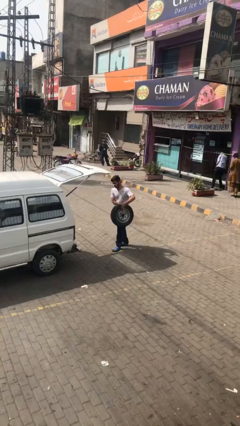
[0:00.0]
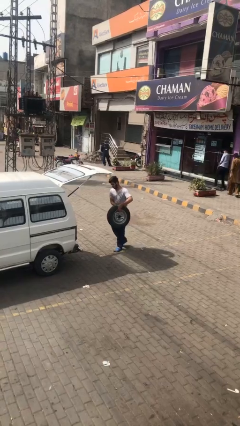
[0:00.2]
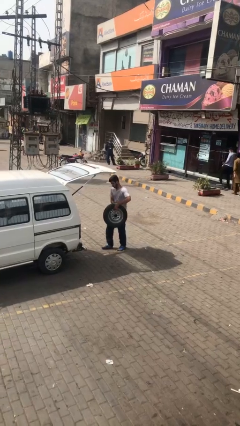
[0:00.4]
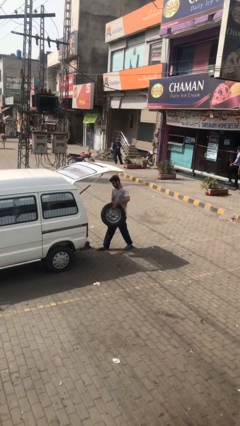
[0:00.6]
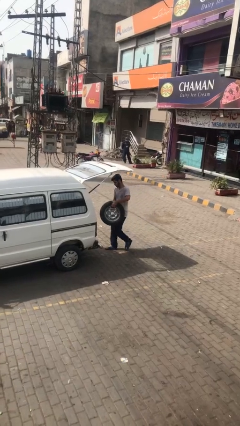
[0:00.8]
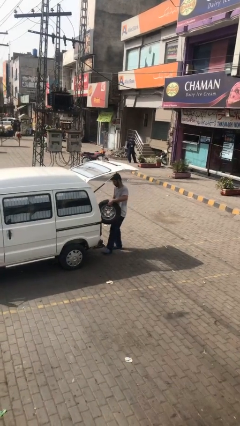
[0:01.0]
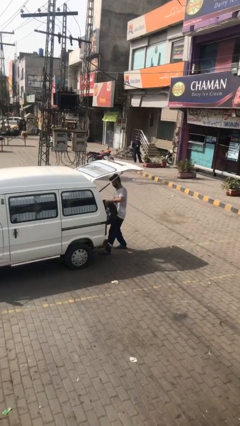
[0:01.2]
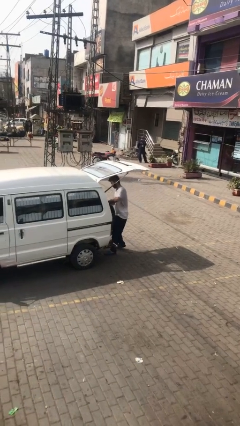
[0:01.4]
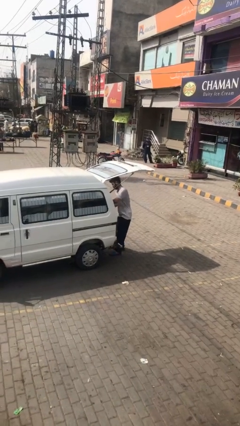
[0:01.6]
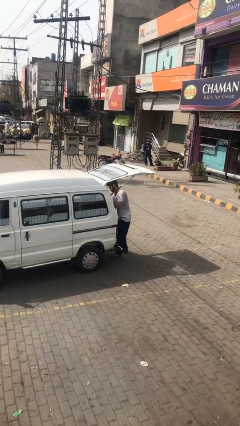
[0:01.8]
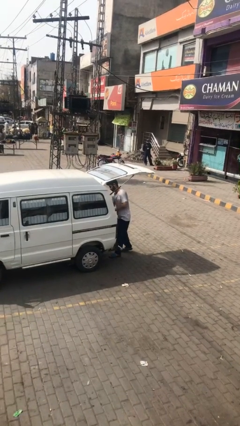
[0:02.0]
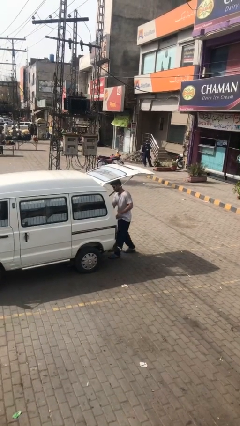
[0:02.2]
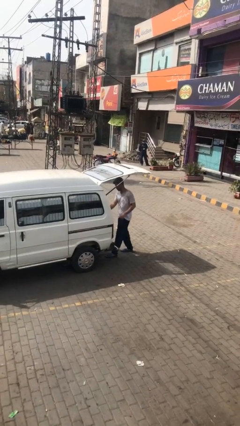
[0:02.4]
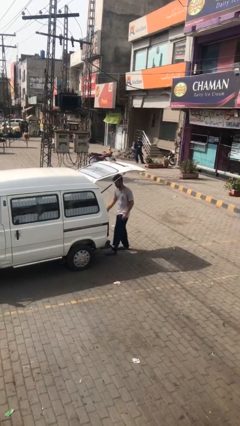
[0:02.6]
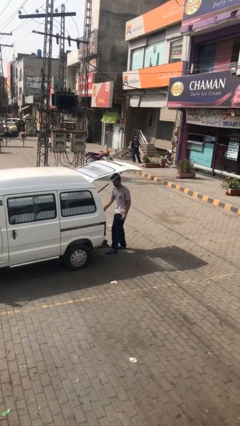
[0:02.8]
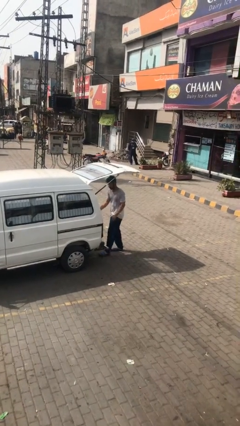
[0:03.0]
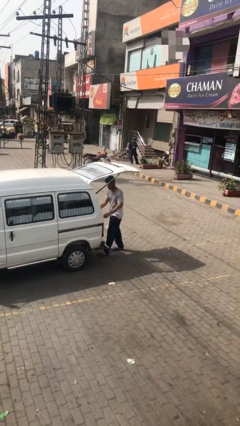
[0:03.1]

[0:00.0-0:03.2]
person loads car

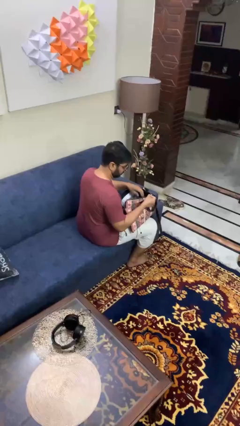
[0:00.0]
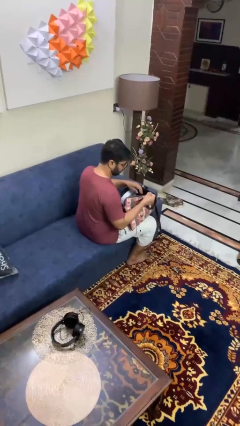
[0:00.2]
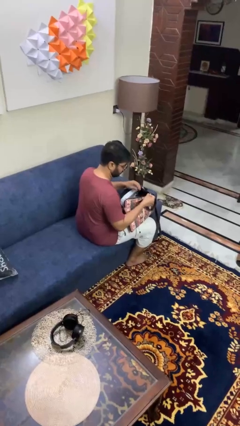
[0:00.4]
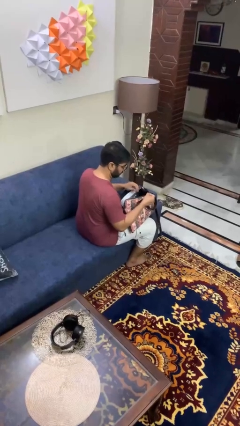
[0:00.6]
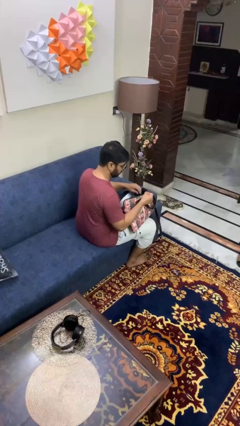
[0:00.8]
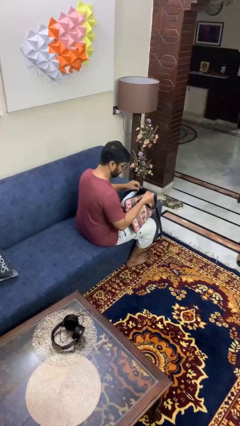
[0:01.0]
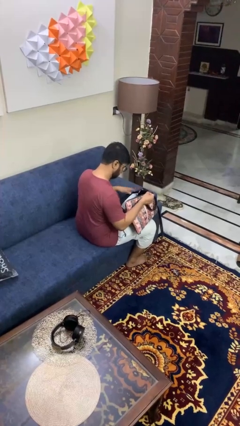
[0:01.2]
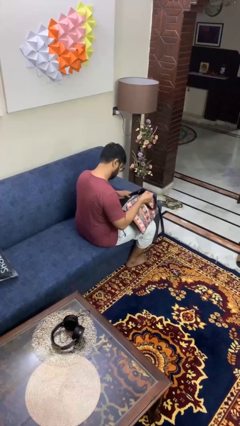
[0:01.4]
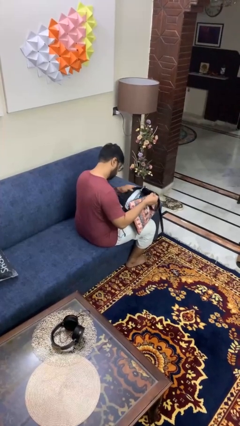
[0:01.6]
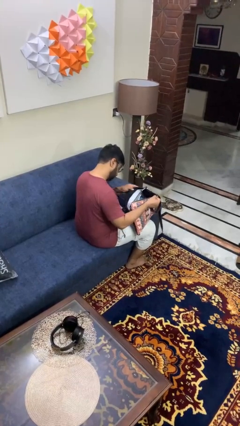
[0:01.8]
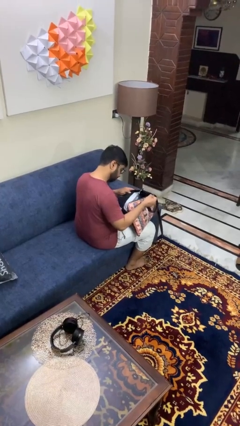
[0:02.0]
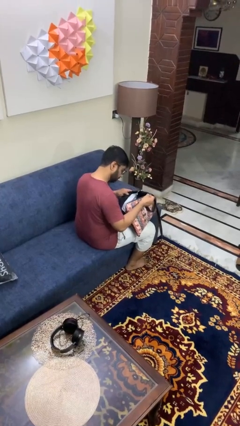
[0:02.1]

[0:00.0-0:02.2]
person searches in purse

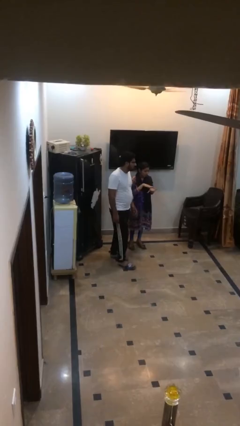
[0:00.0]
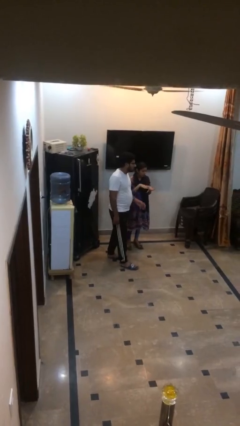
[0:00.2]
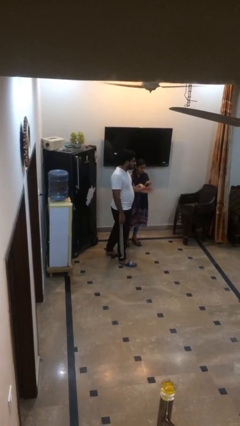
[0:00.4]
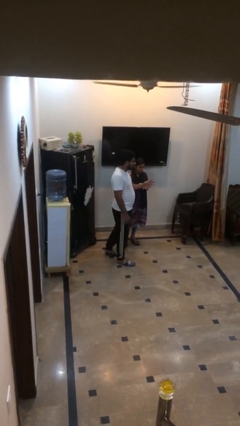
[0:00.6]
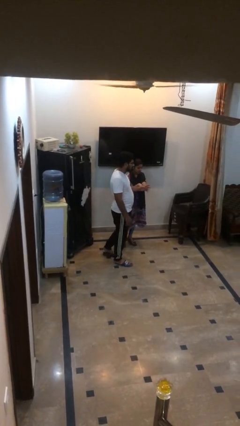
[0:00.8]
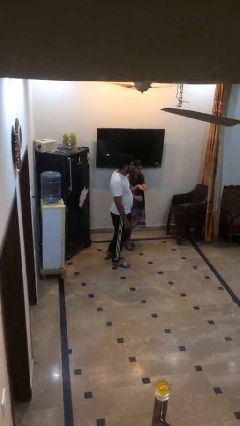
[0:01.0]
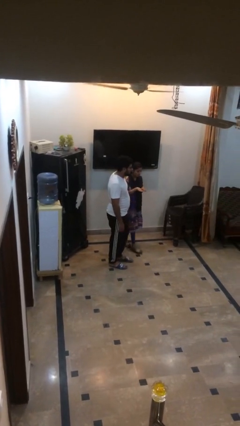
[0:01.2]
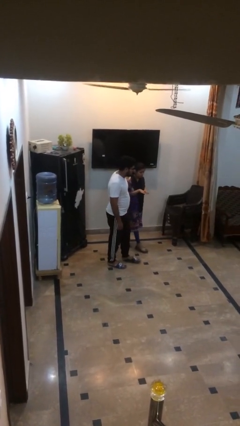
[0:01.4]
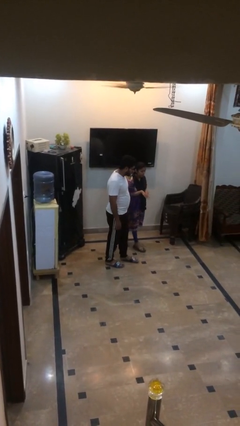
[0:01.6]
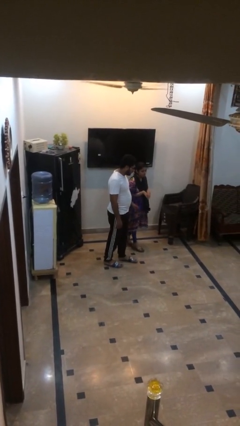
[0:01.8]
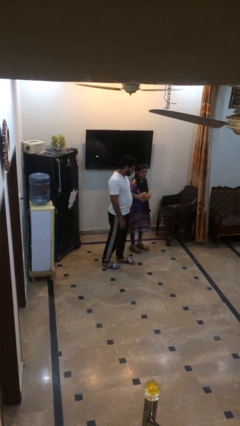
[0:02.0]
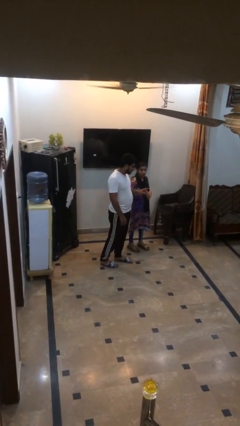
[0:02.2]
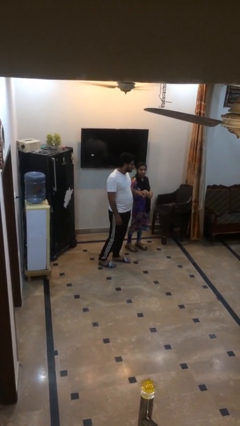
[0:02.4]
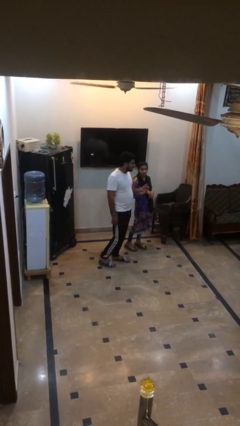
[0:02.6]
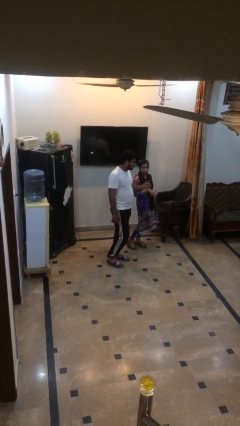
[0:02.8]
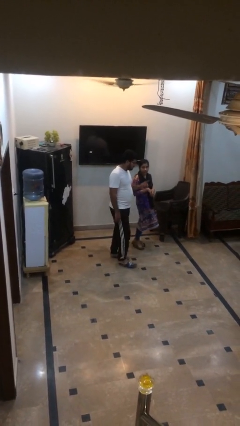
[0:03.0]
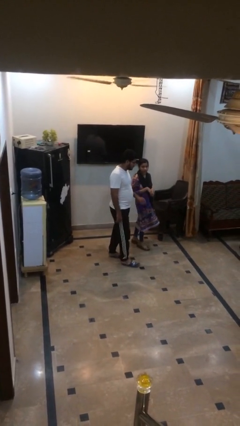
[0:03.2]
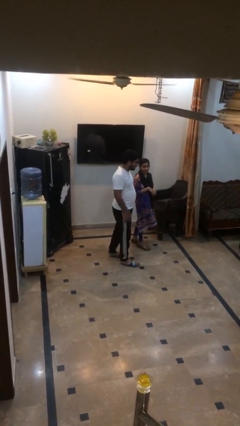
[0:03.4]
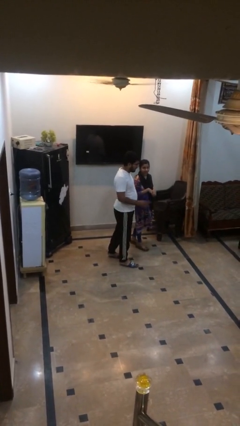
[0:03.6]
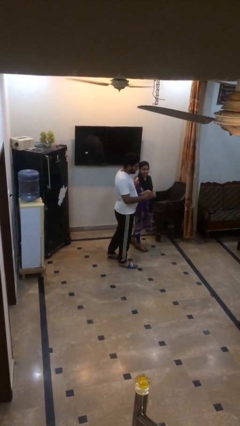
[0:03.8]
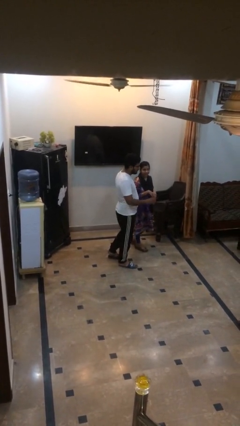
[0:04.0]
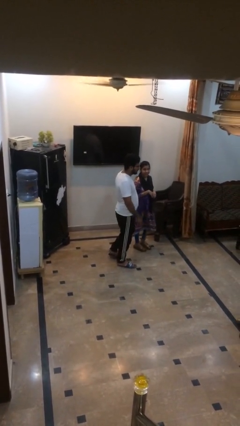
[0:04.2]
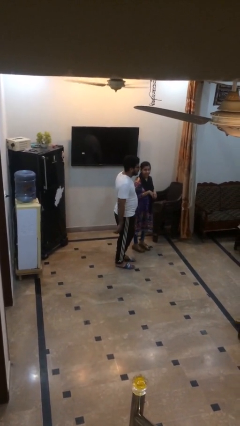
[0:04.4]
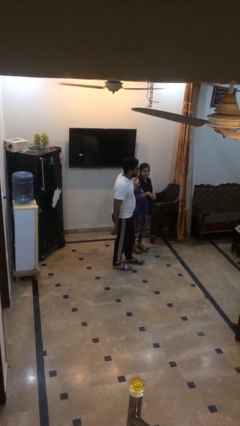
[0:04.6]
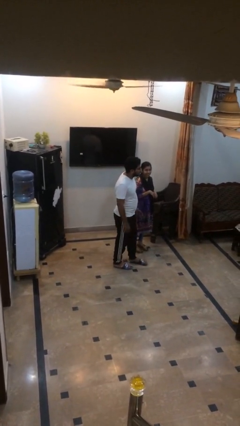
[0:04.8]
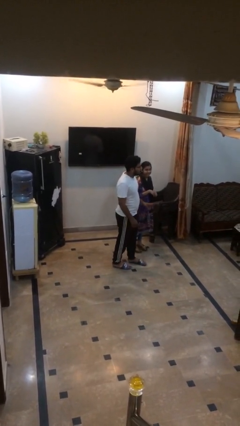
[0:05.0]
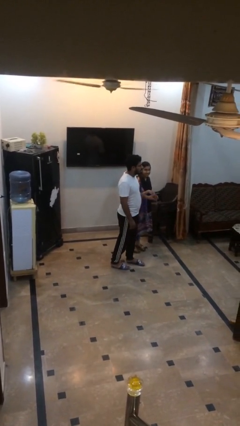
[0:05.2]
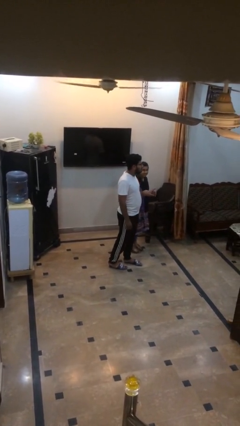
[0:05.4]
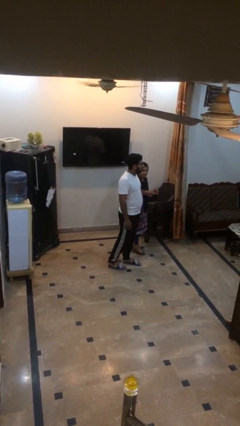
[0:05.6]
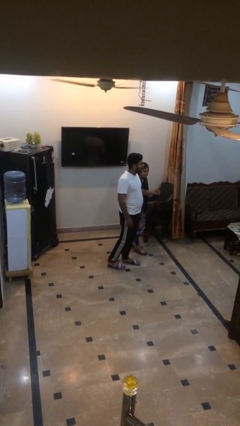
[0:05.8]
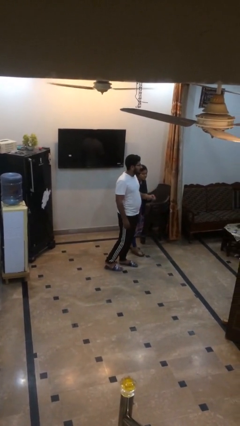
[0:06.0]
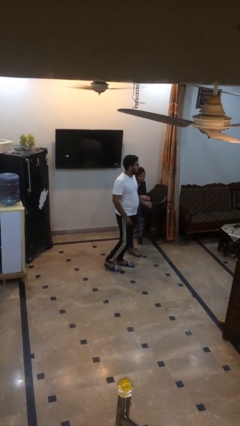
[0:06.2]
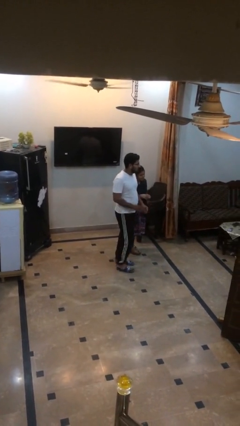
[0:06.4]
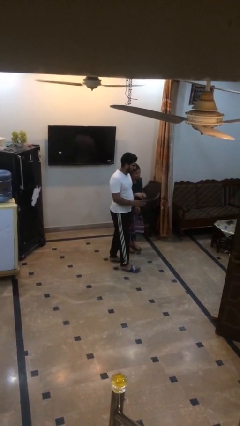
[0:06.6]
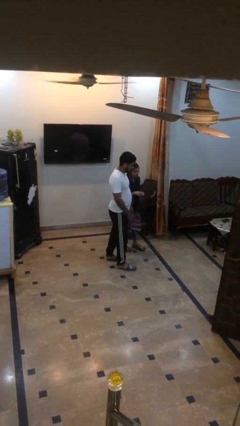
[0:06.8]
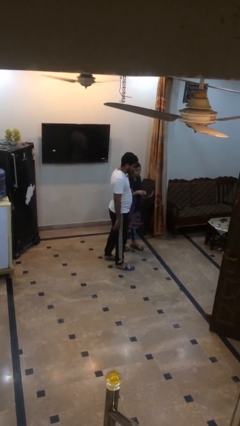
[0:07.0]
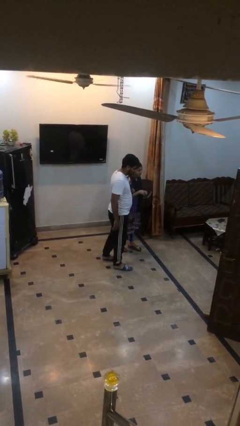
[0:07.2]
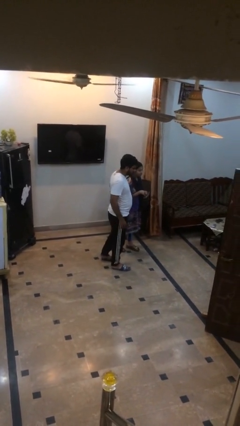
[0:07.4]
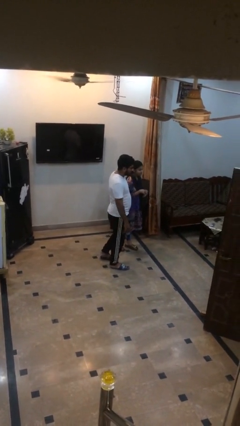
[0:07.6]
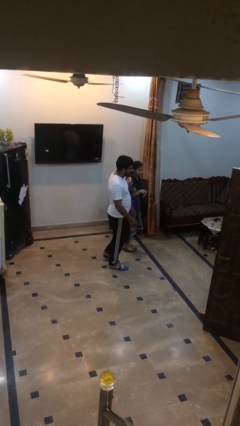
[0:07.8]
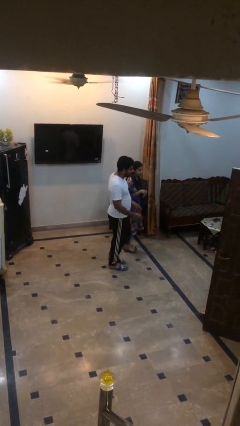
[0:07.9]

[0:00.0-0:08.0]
person talks to person

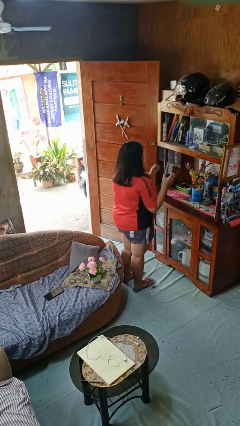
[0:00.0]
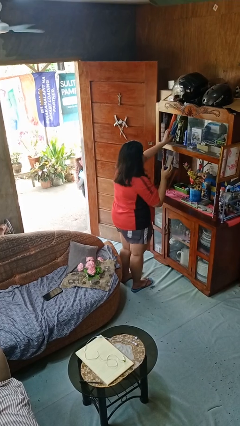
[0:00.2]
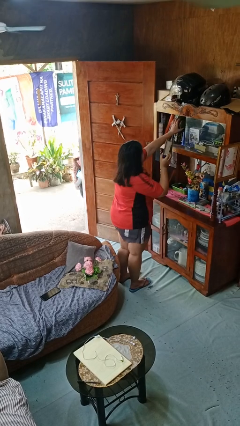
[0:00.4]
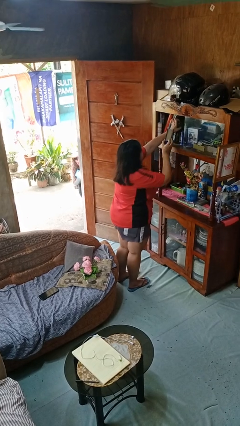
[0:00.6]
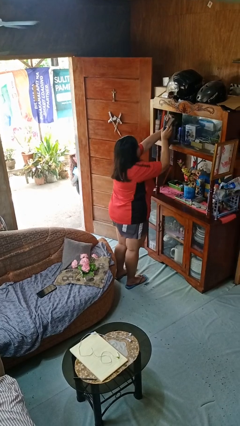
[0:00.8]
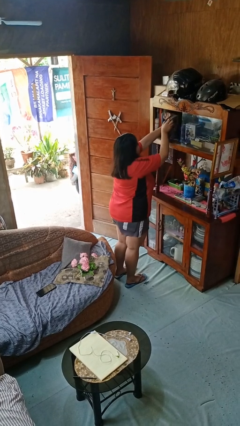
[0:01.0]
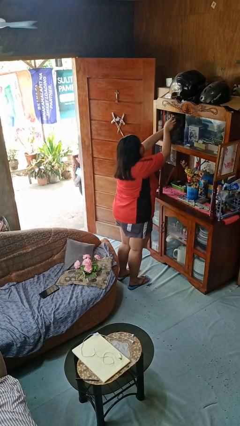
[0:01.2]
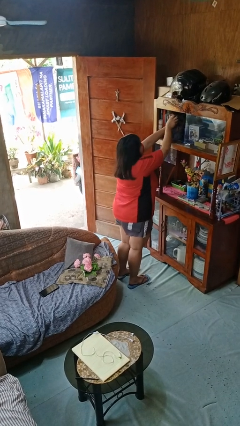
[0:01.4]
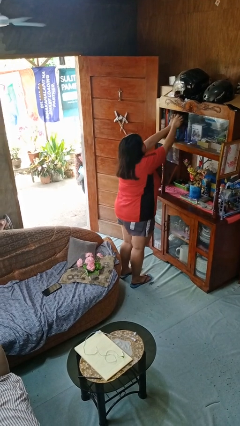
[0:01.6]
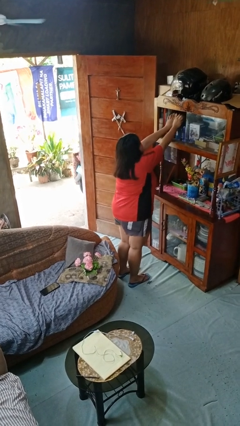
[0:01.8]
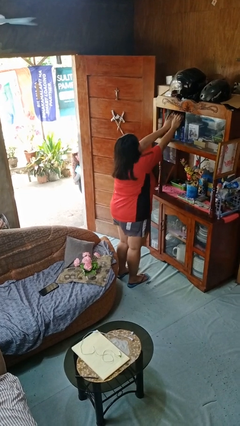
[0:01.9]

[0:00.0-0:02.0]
person puts down object on shelf

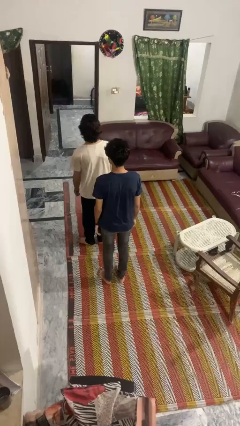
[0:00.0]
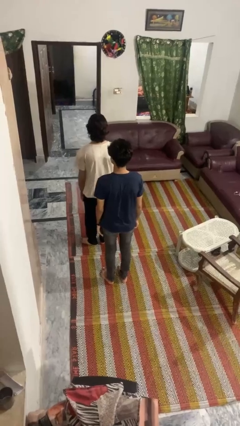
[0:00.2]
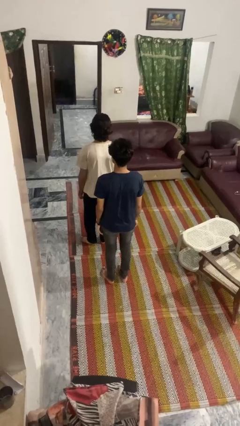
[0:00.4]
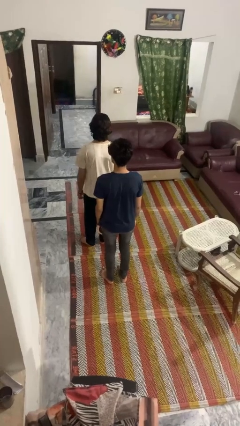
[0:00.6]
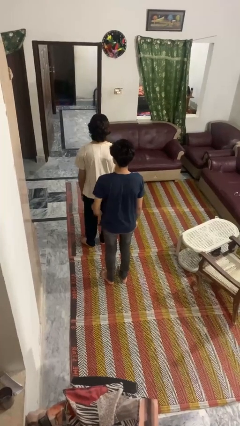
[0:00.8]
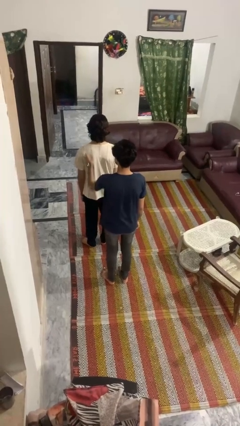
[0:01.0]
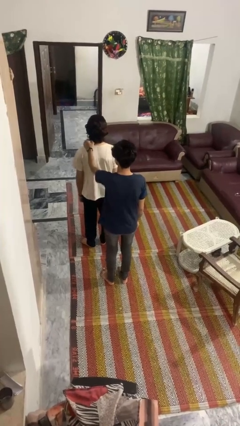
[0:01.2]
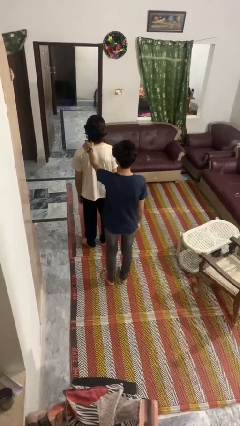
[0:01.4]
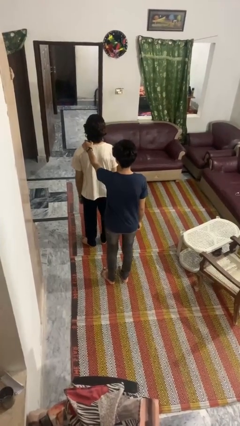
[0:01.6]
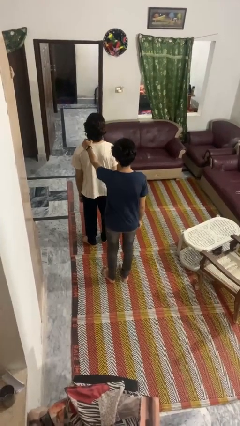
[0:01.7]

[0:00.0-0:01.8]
person grabs person by shoulder
